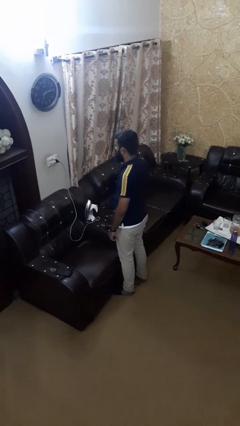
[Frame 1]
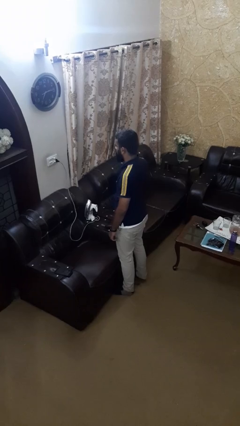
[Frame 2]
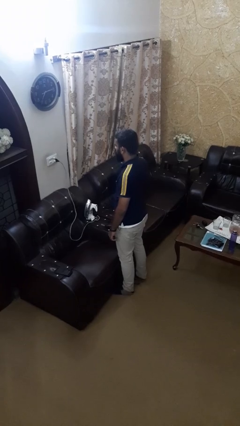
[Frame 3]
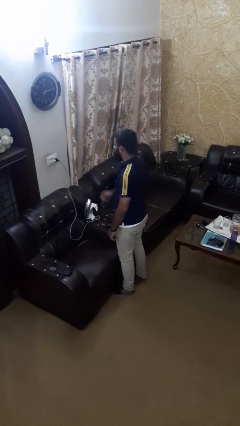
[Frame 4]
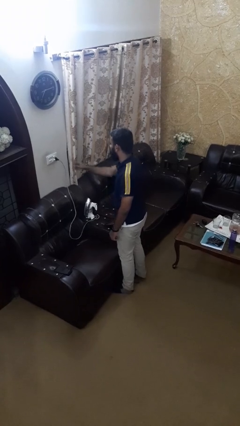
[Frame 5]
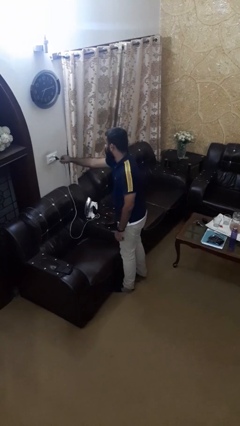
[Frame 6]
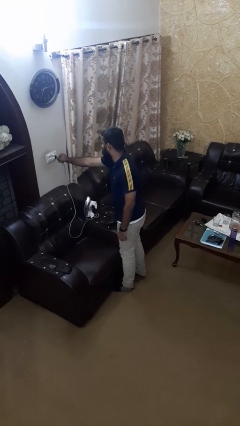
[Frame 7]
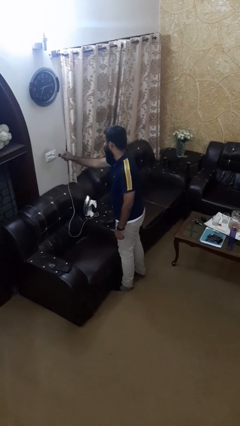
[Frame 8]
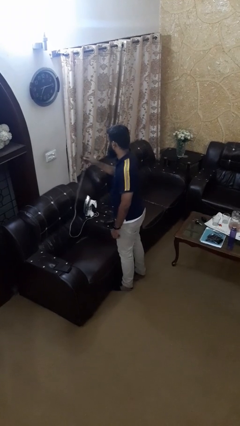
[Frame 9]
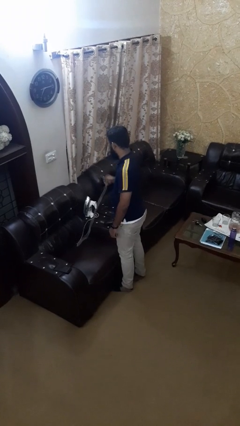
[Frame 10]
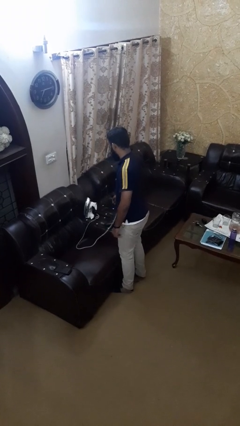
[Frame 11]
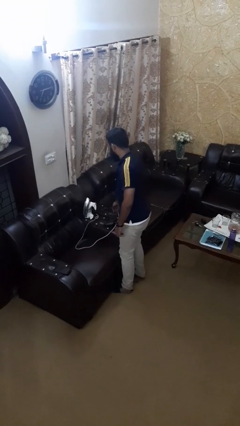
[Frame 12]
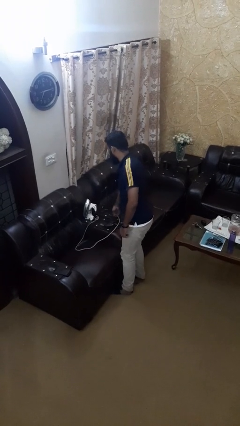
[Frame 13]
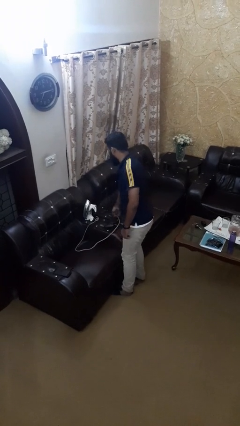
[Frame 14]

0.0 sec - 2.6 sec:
person unplugs from electrical socket

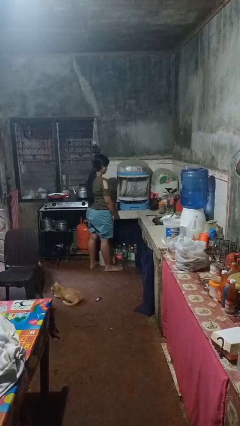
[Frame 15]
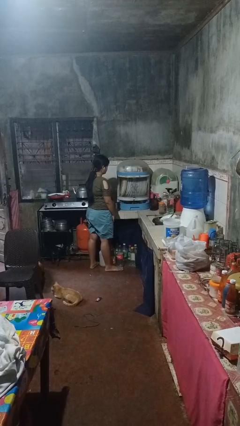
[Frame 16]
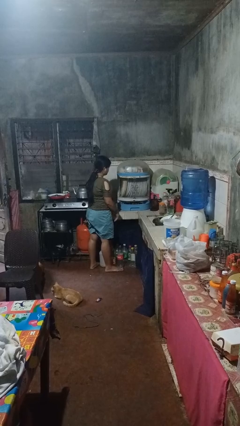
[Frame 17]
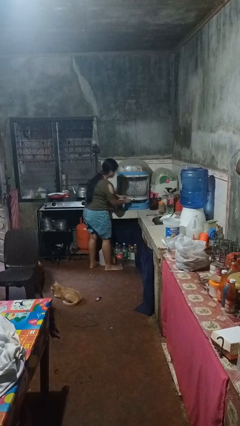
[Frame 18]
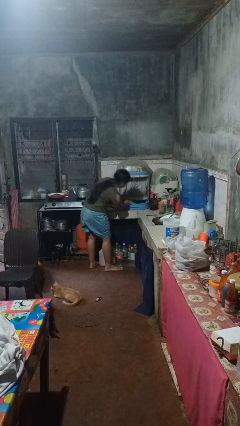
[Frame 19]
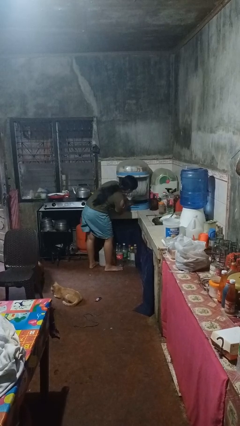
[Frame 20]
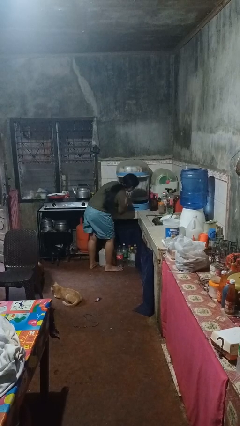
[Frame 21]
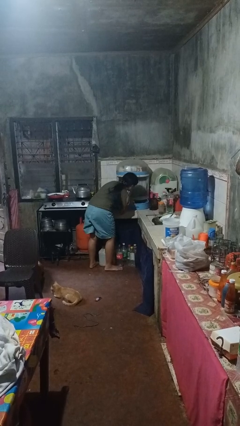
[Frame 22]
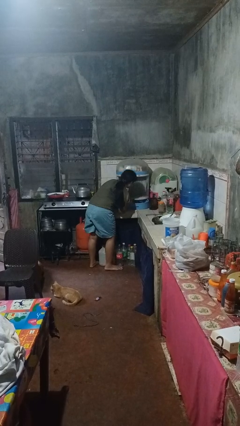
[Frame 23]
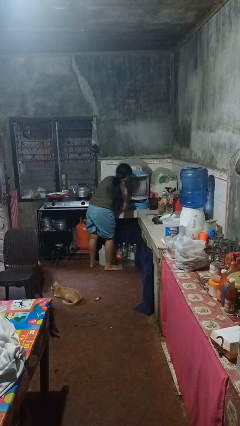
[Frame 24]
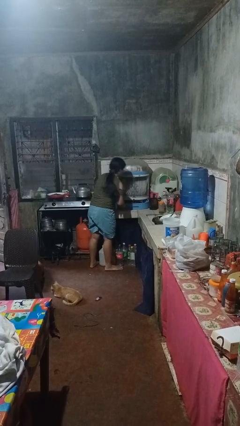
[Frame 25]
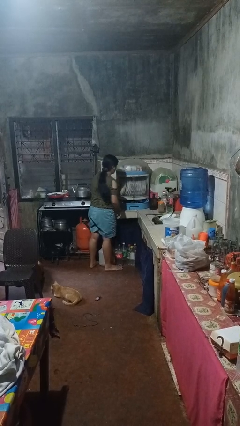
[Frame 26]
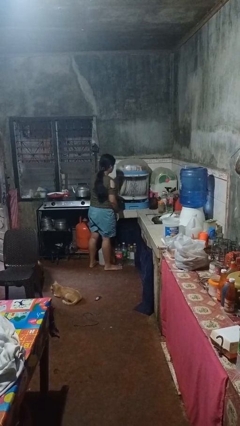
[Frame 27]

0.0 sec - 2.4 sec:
person searches in kitchen drawer

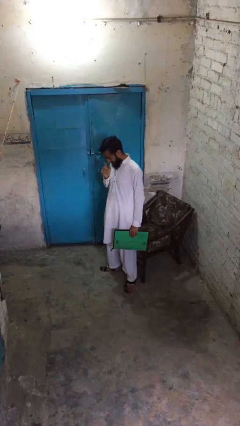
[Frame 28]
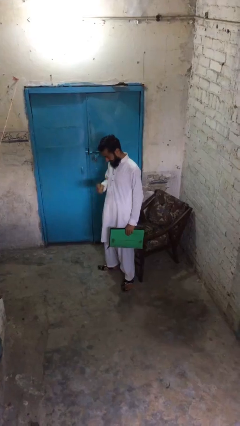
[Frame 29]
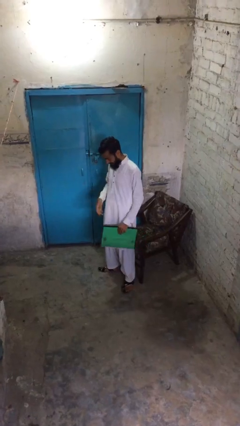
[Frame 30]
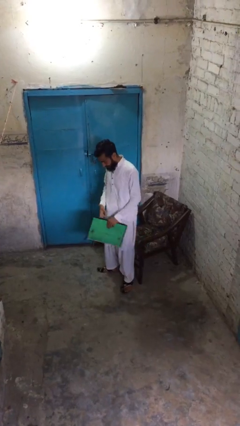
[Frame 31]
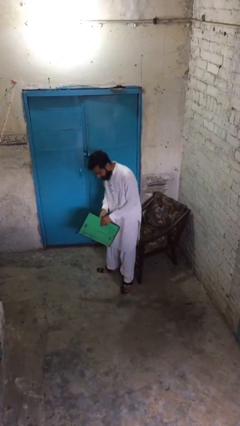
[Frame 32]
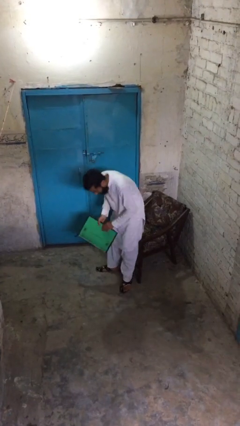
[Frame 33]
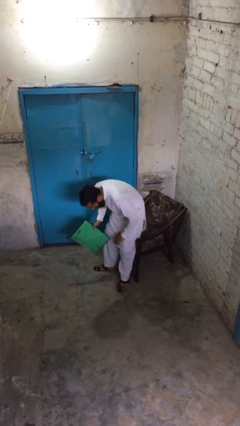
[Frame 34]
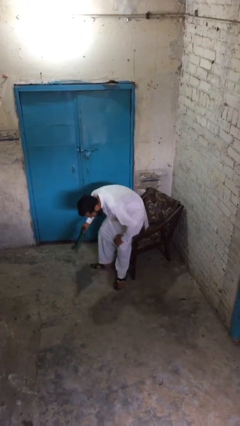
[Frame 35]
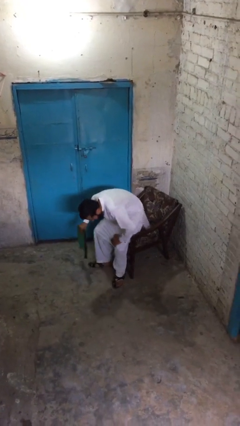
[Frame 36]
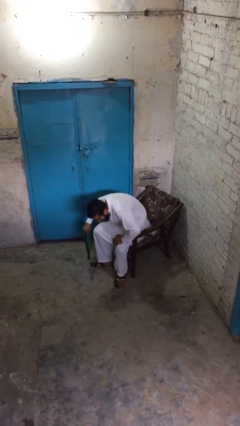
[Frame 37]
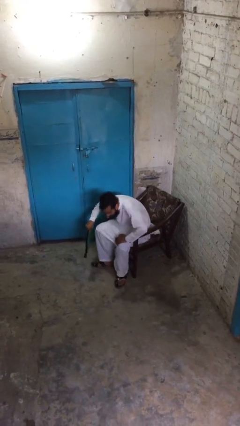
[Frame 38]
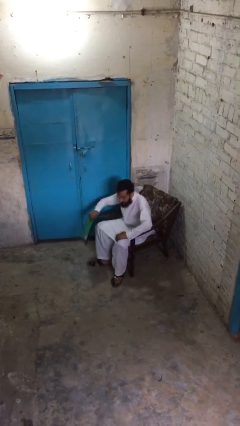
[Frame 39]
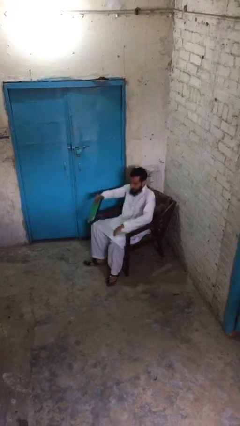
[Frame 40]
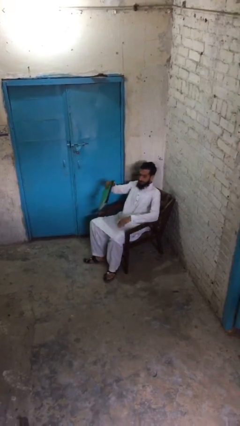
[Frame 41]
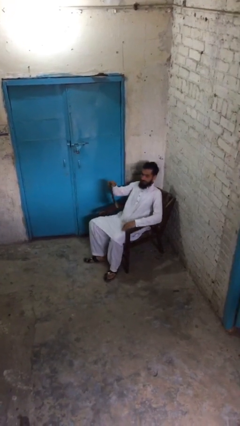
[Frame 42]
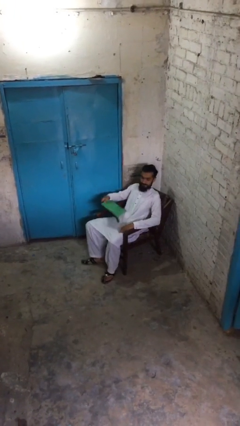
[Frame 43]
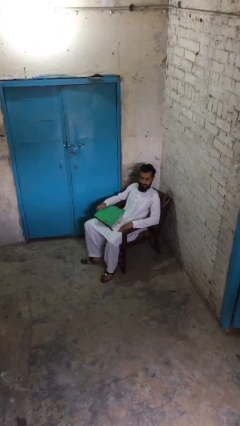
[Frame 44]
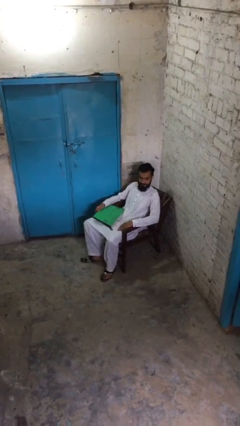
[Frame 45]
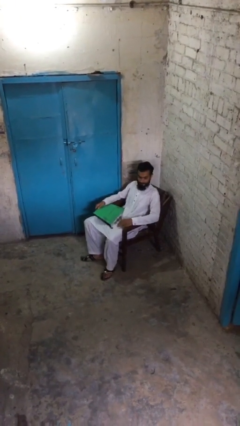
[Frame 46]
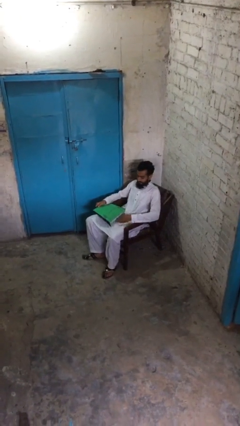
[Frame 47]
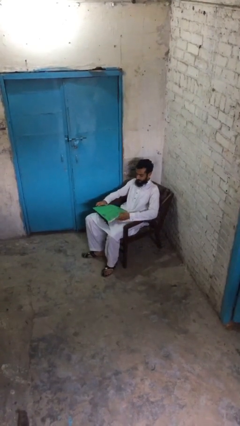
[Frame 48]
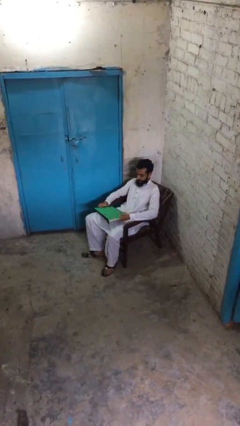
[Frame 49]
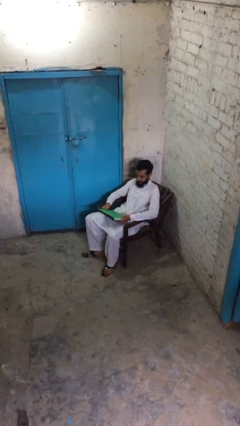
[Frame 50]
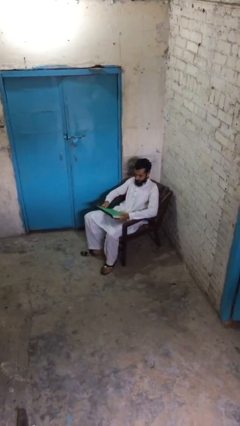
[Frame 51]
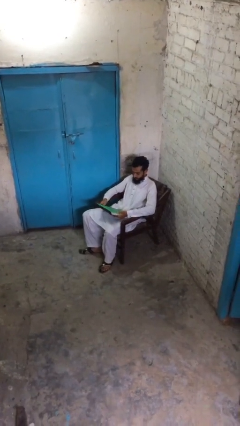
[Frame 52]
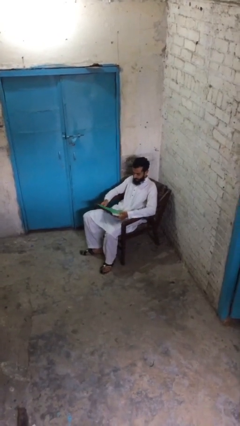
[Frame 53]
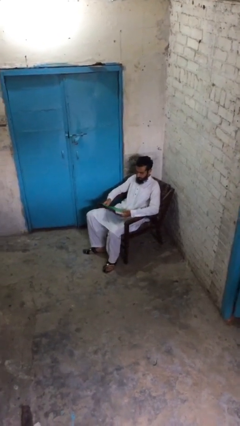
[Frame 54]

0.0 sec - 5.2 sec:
person sits down

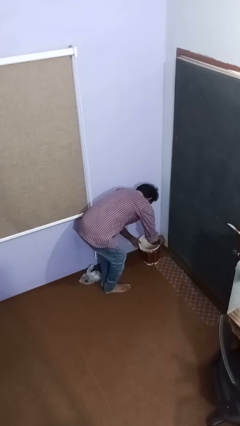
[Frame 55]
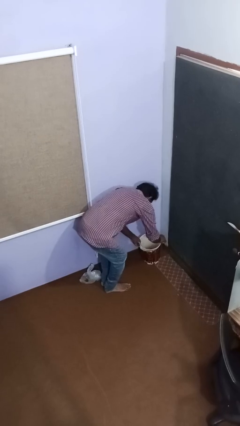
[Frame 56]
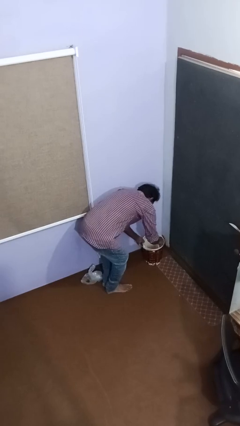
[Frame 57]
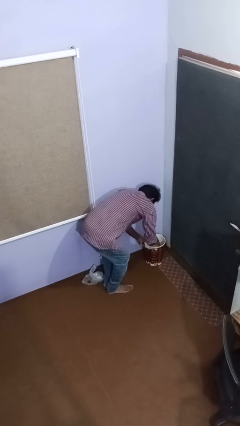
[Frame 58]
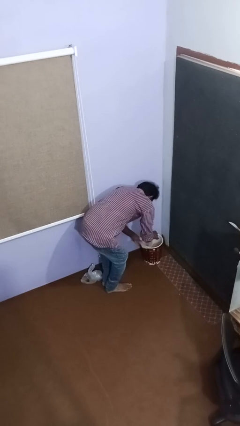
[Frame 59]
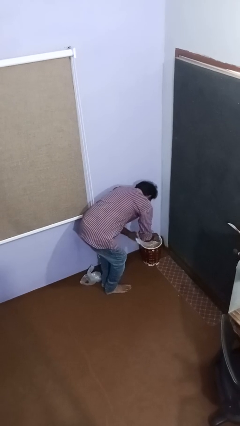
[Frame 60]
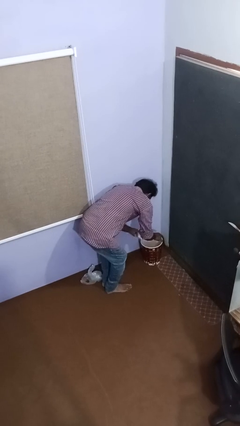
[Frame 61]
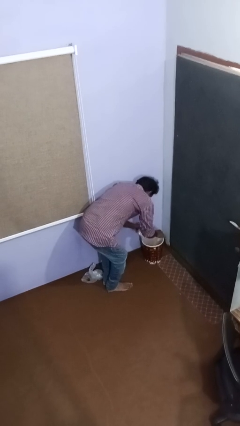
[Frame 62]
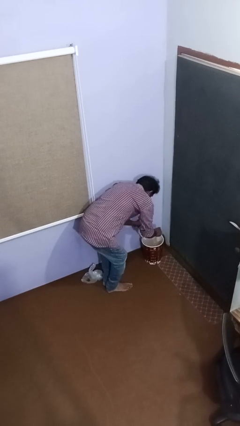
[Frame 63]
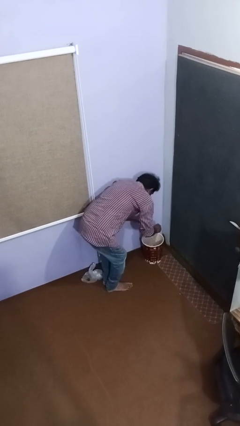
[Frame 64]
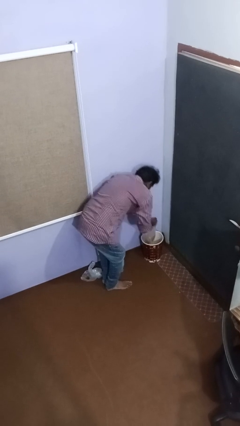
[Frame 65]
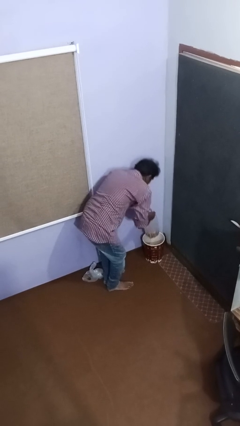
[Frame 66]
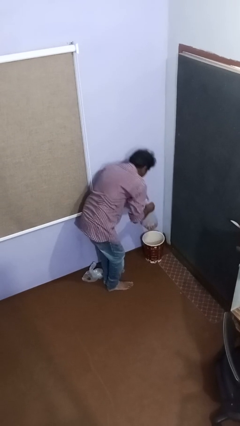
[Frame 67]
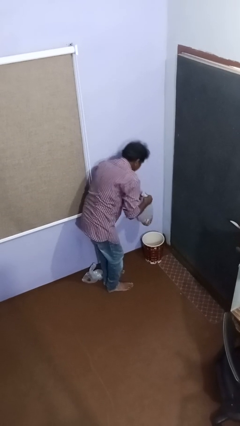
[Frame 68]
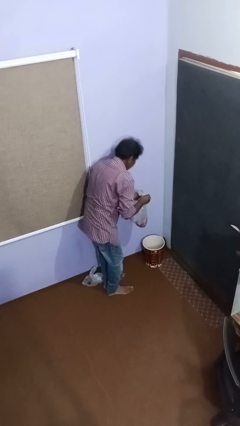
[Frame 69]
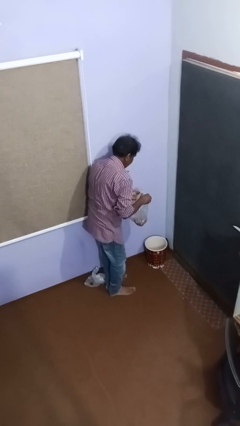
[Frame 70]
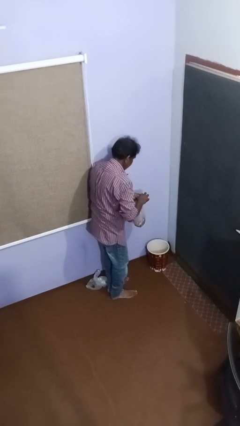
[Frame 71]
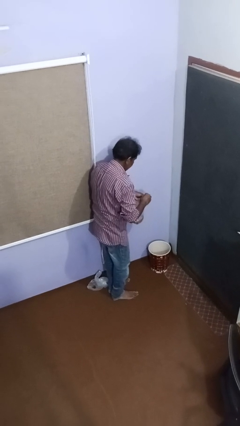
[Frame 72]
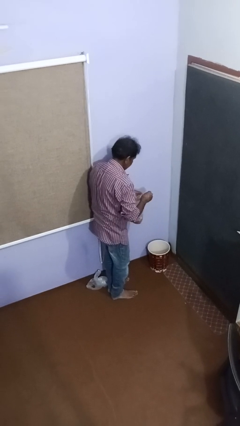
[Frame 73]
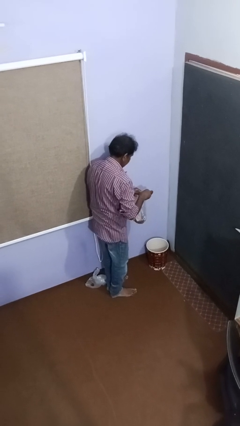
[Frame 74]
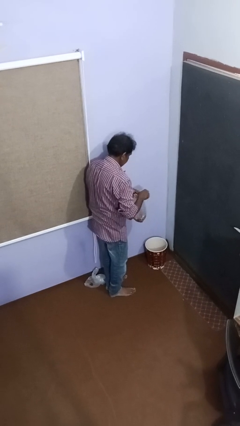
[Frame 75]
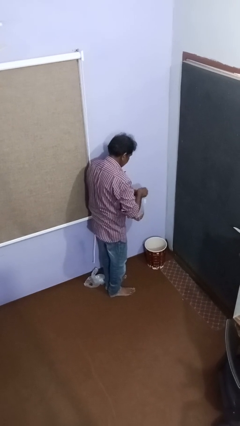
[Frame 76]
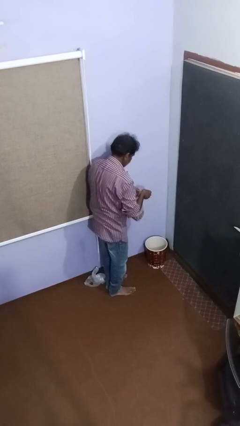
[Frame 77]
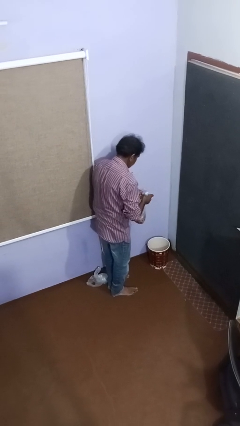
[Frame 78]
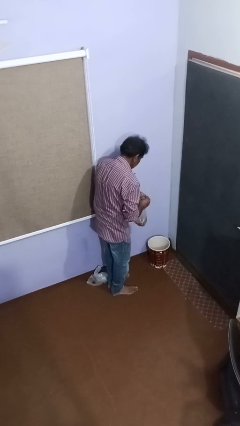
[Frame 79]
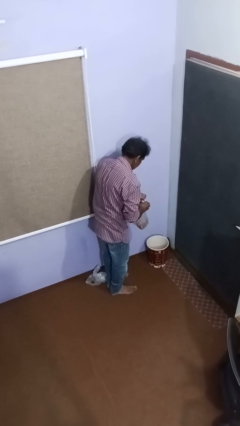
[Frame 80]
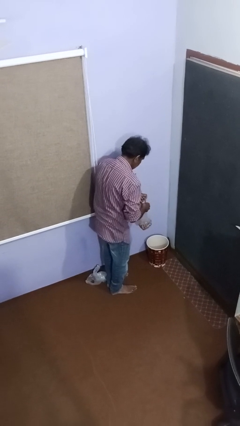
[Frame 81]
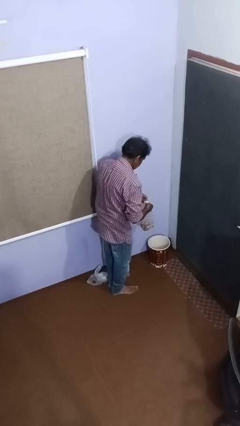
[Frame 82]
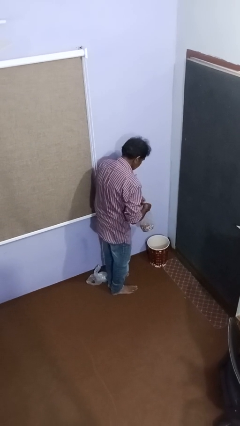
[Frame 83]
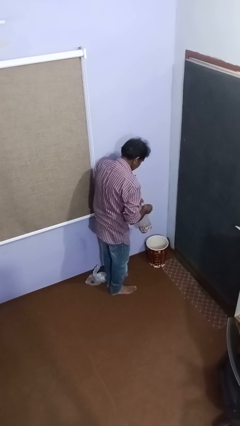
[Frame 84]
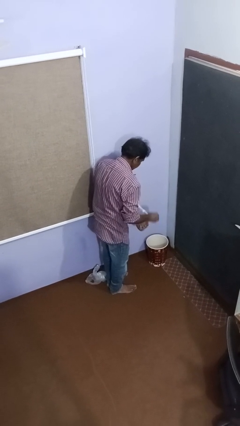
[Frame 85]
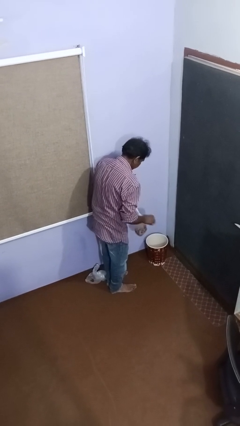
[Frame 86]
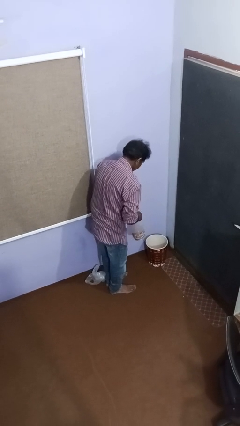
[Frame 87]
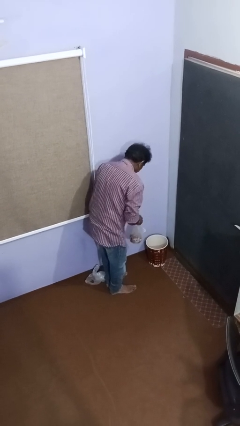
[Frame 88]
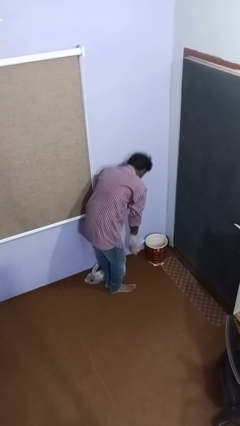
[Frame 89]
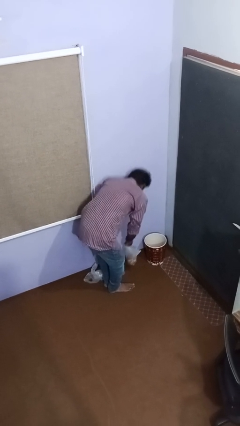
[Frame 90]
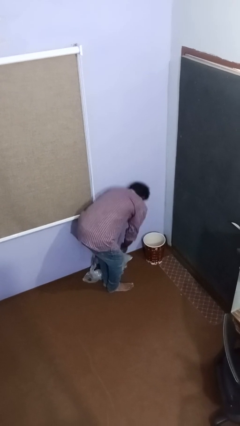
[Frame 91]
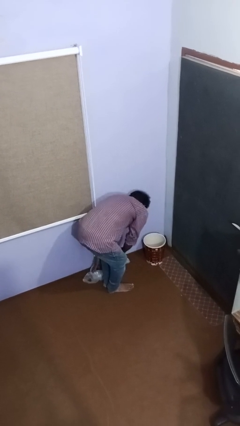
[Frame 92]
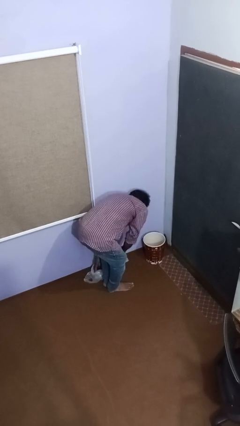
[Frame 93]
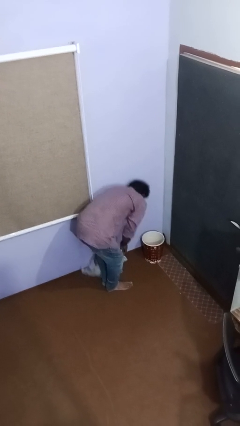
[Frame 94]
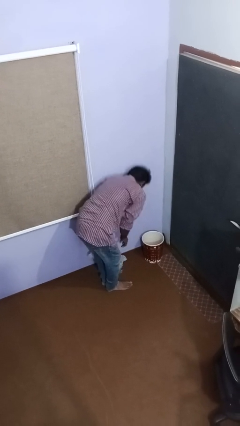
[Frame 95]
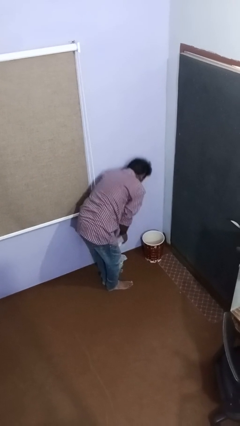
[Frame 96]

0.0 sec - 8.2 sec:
person removes trashbag from trashcan
